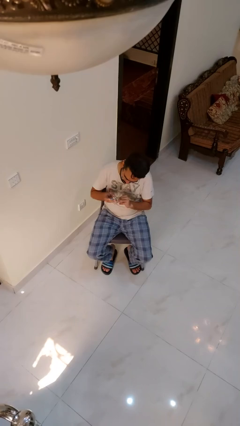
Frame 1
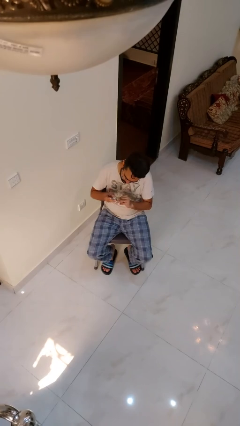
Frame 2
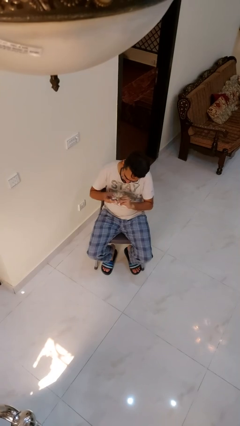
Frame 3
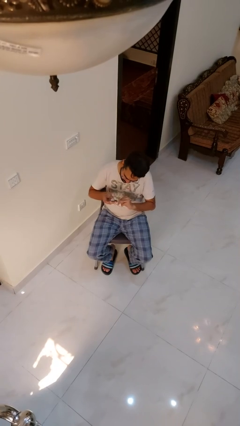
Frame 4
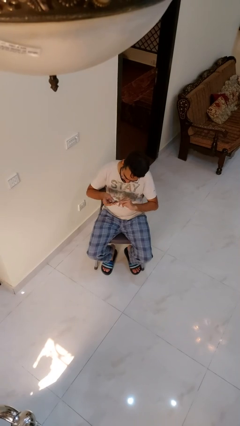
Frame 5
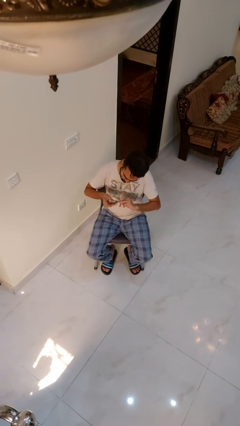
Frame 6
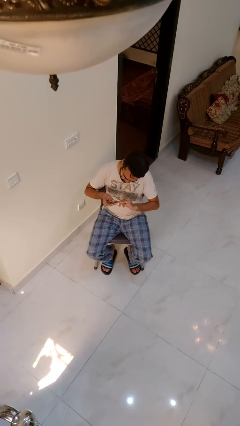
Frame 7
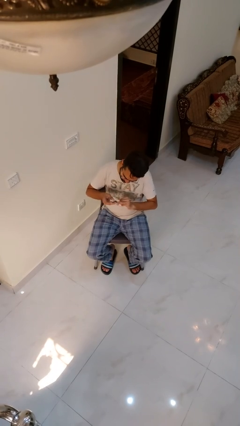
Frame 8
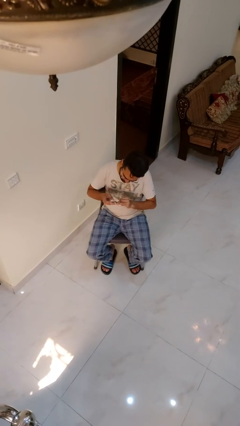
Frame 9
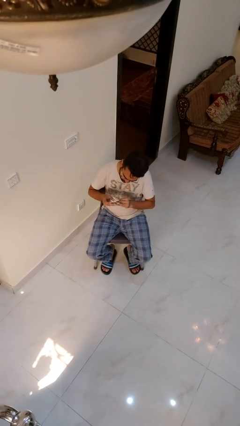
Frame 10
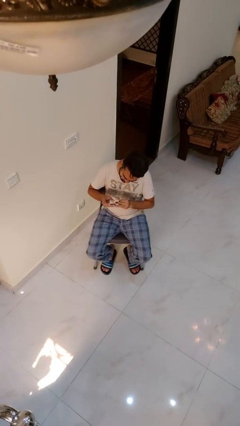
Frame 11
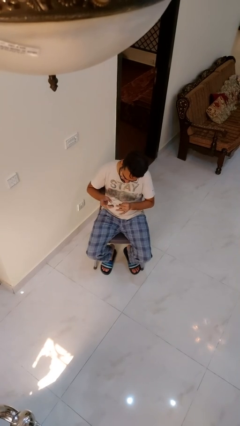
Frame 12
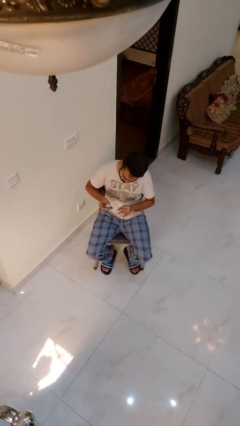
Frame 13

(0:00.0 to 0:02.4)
person clips fingernails

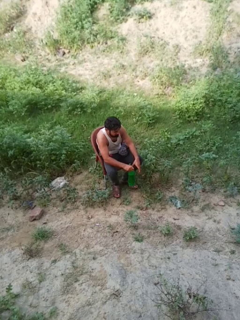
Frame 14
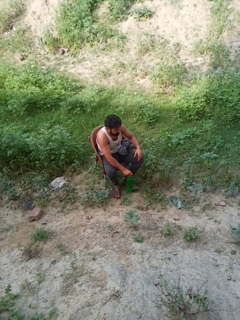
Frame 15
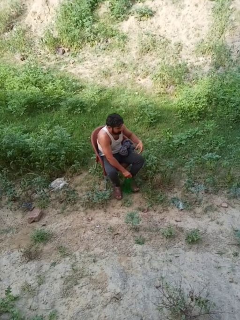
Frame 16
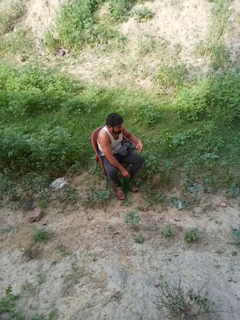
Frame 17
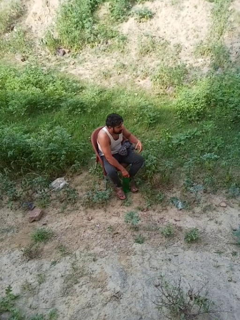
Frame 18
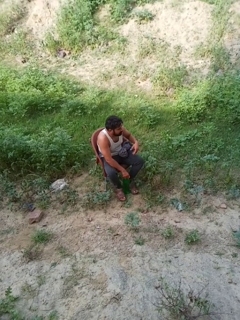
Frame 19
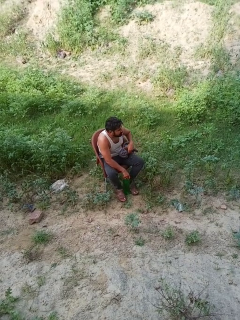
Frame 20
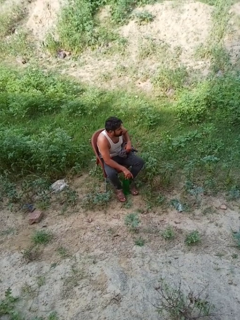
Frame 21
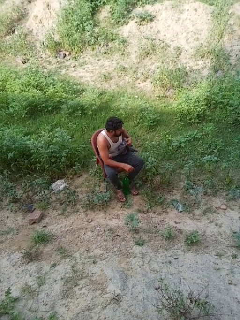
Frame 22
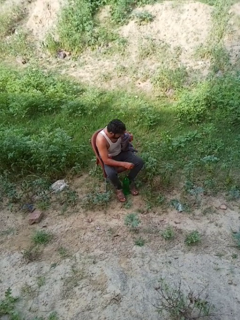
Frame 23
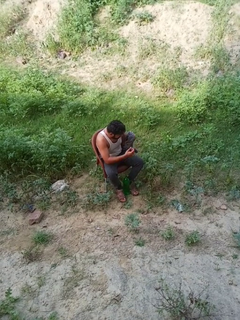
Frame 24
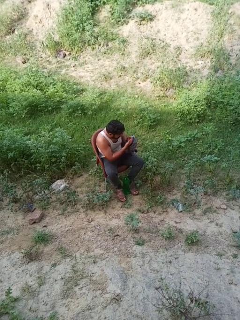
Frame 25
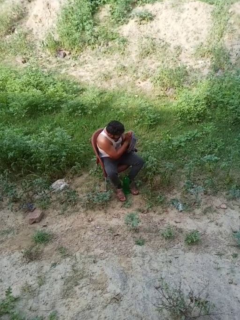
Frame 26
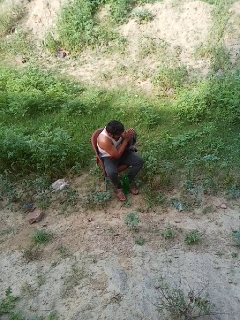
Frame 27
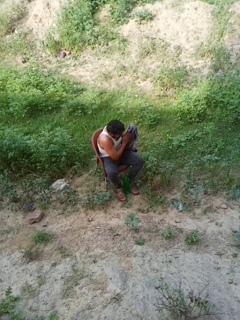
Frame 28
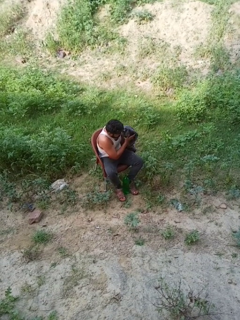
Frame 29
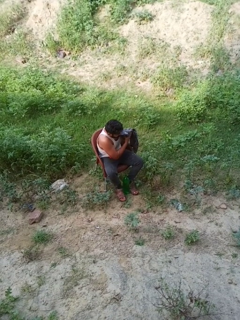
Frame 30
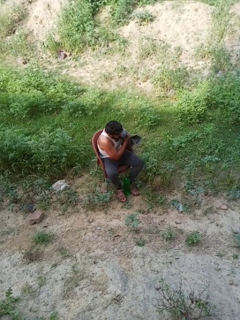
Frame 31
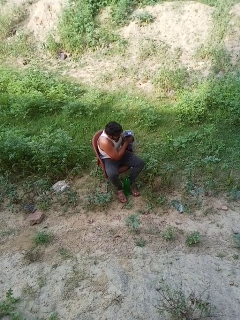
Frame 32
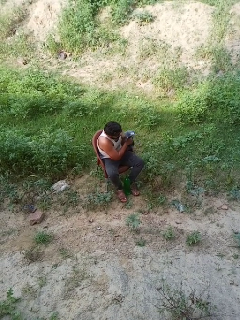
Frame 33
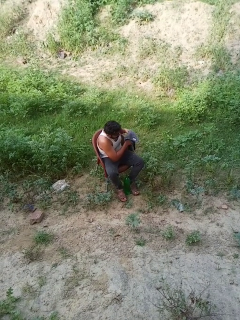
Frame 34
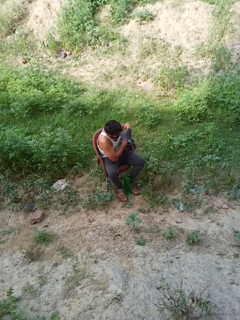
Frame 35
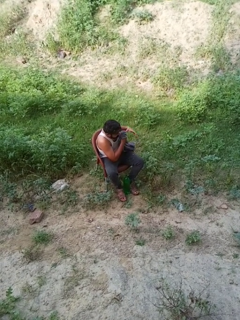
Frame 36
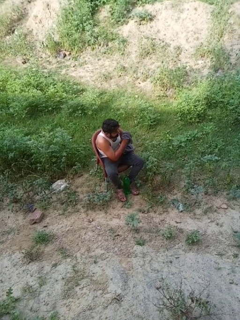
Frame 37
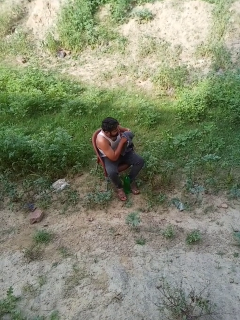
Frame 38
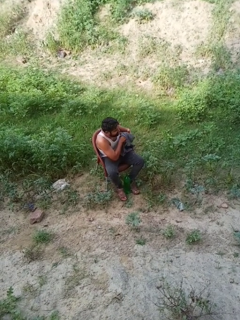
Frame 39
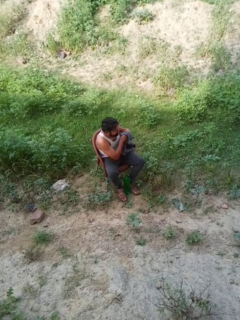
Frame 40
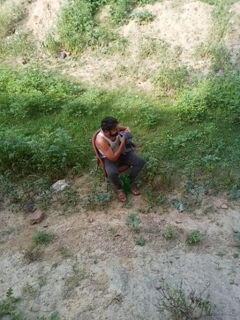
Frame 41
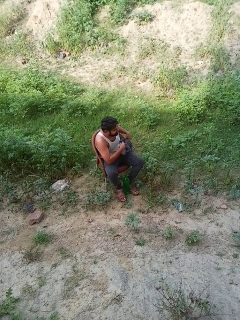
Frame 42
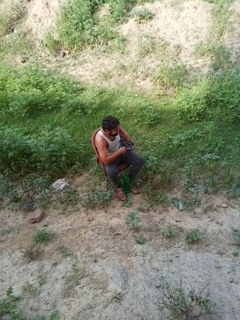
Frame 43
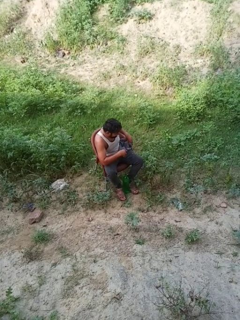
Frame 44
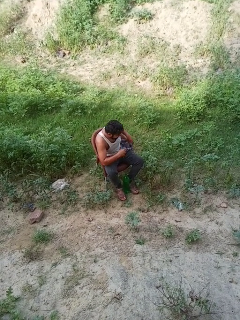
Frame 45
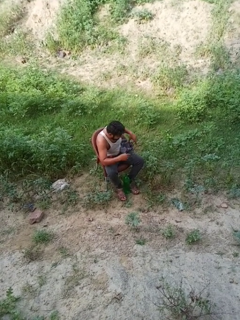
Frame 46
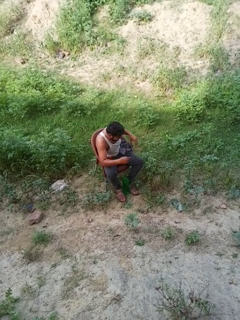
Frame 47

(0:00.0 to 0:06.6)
person dries hands with towel

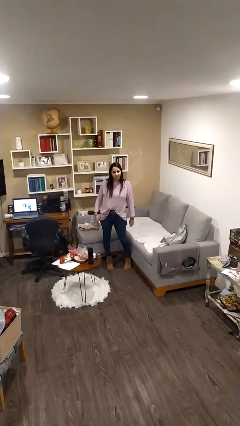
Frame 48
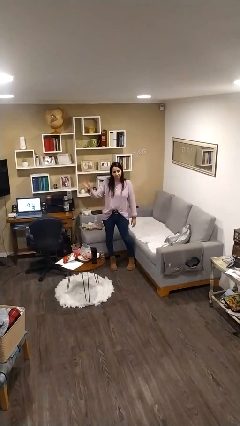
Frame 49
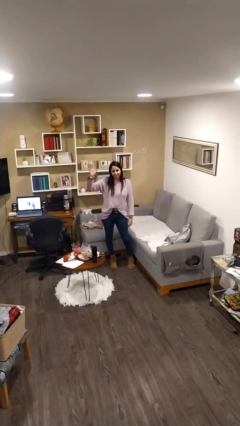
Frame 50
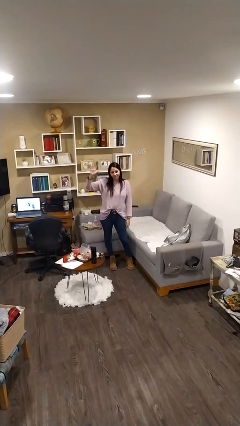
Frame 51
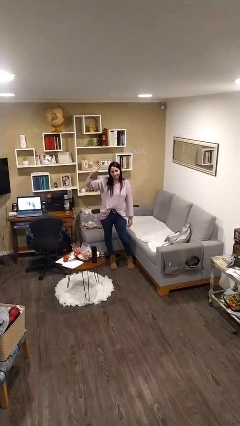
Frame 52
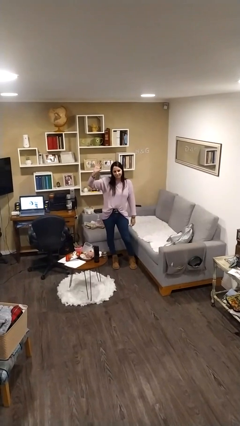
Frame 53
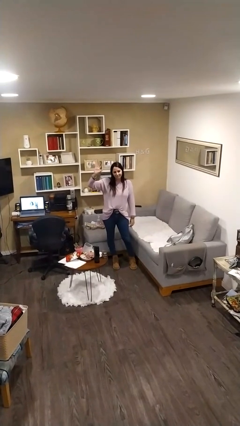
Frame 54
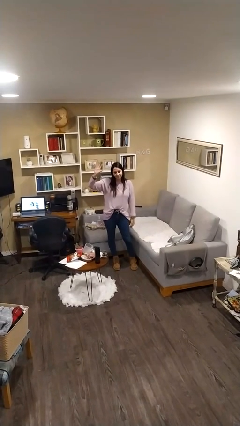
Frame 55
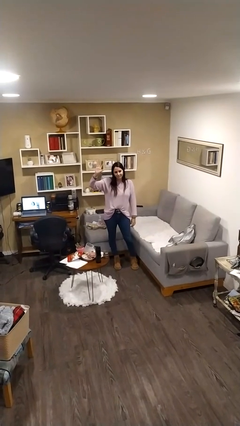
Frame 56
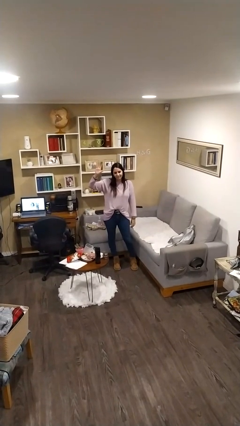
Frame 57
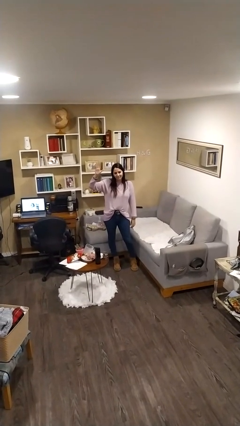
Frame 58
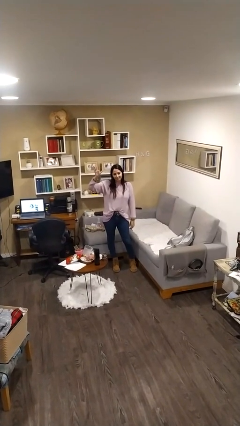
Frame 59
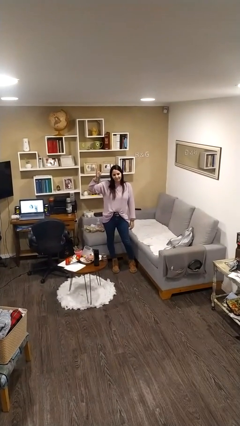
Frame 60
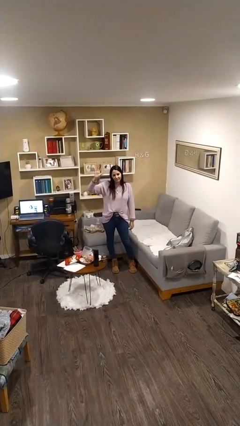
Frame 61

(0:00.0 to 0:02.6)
person waves at person

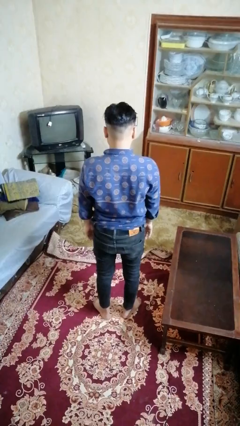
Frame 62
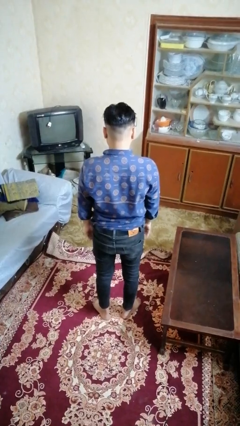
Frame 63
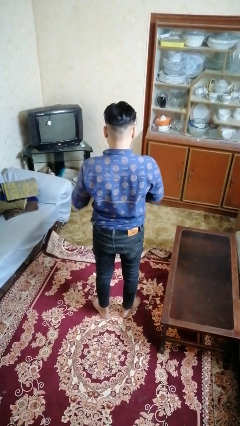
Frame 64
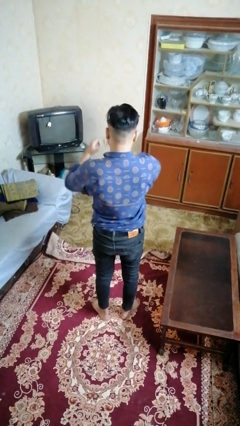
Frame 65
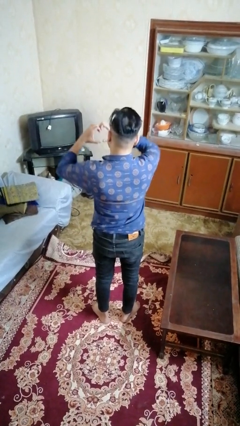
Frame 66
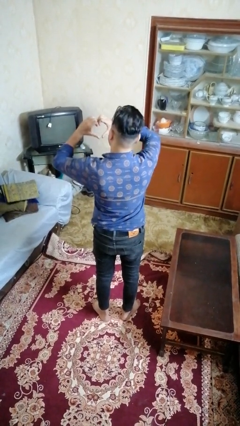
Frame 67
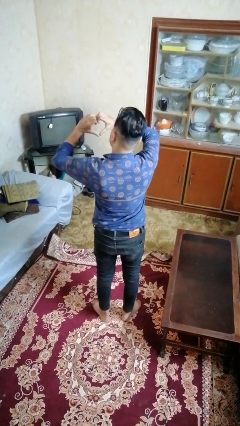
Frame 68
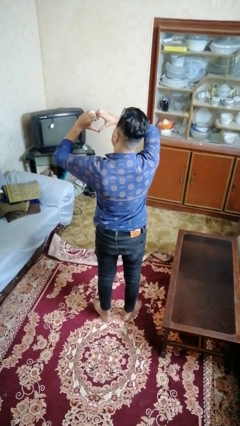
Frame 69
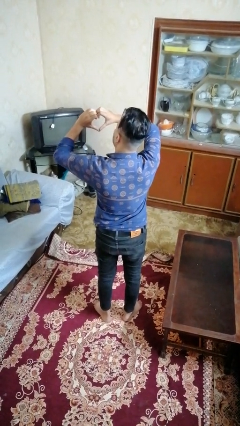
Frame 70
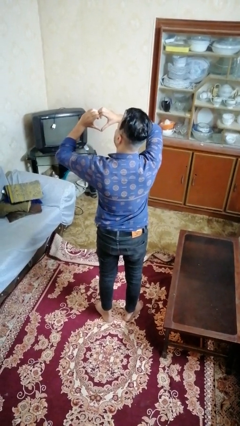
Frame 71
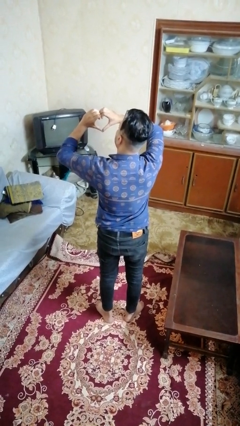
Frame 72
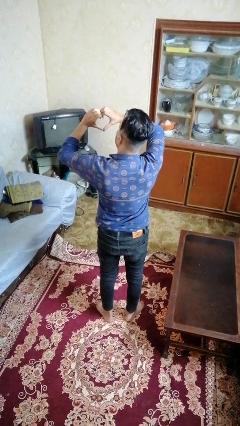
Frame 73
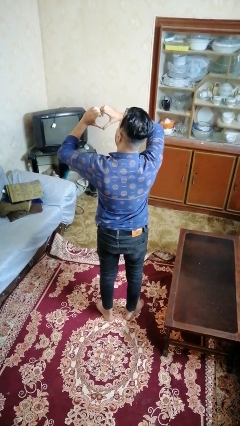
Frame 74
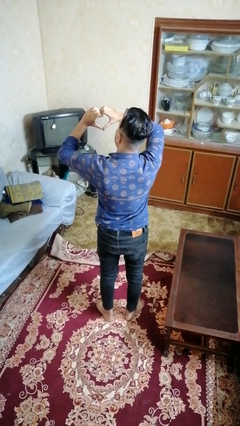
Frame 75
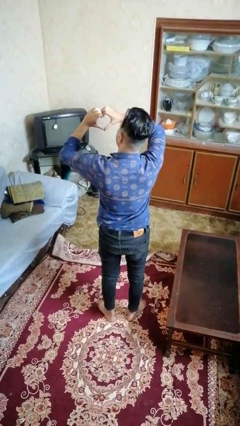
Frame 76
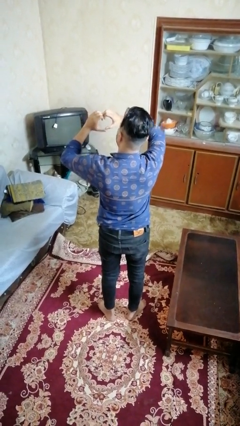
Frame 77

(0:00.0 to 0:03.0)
person gestures heart

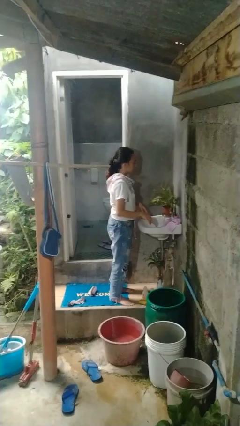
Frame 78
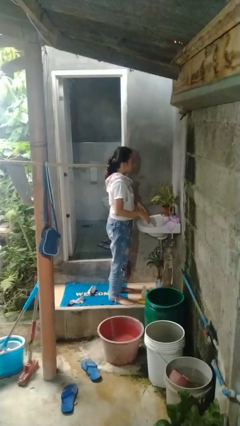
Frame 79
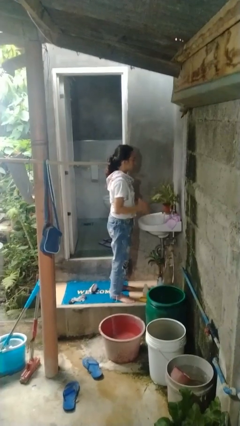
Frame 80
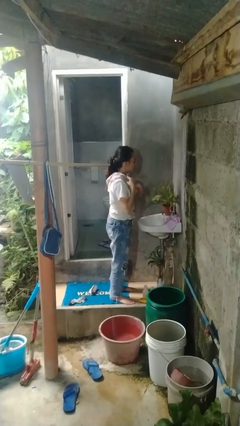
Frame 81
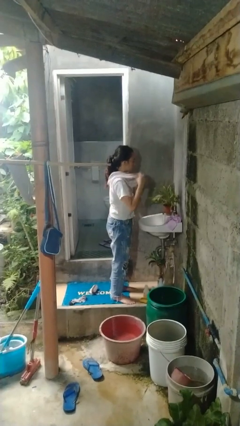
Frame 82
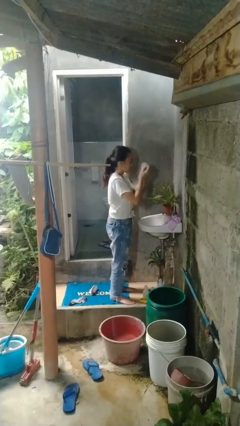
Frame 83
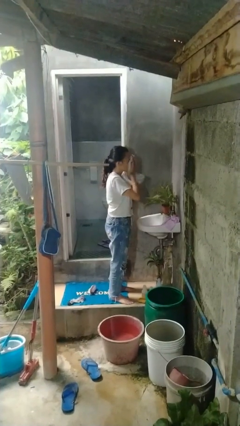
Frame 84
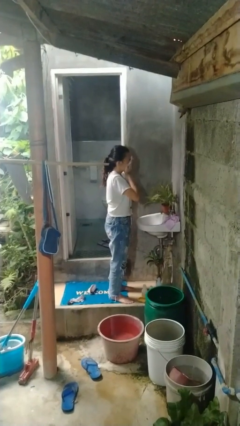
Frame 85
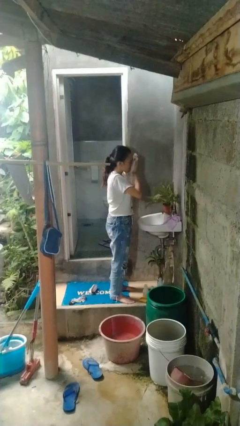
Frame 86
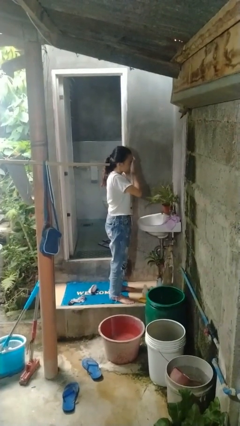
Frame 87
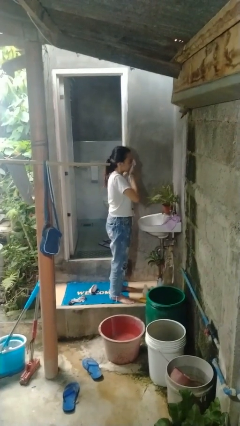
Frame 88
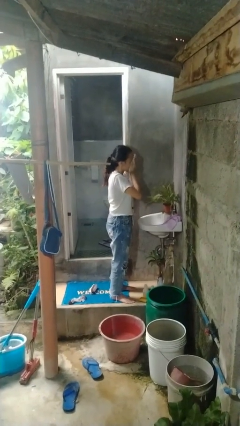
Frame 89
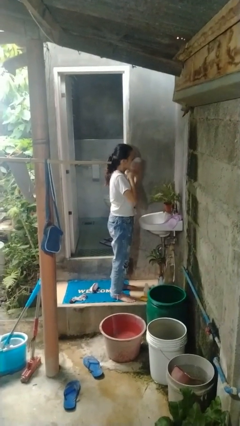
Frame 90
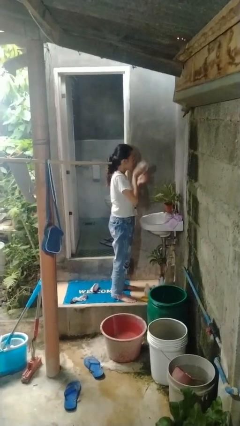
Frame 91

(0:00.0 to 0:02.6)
person dries face with towel

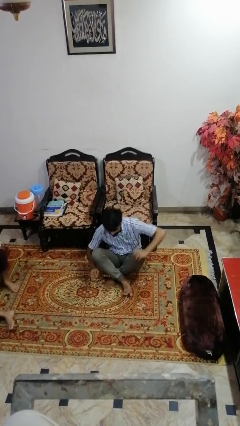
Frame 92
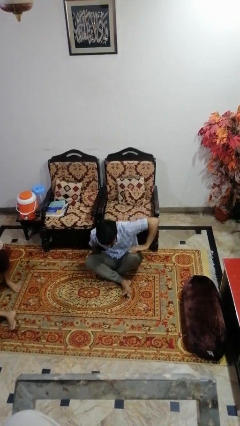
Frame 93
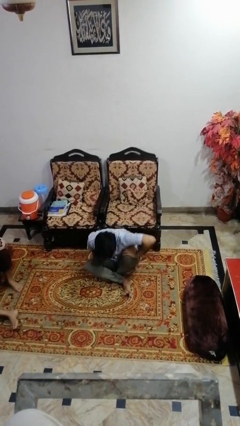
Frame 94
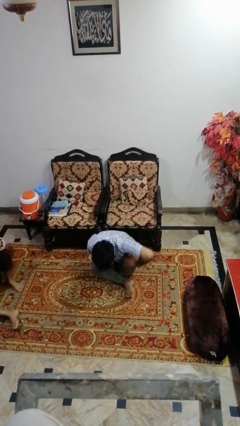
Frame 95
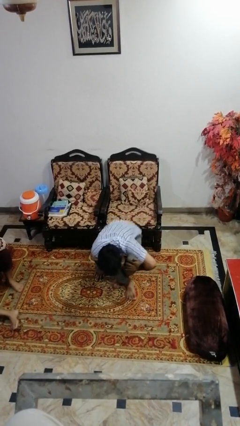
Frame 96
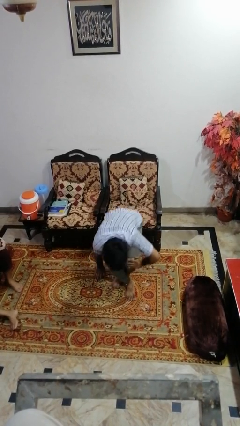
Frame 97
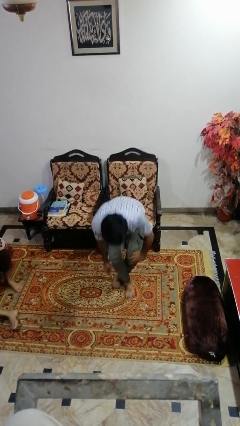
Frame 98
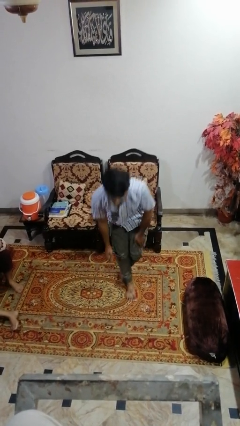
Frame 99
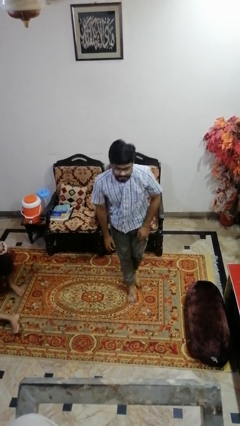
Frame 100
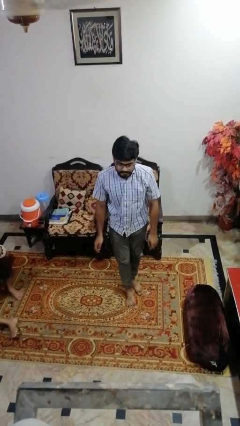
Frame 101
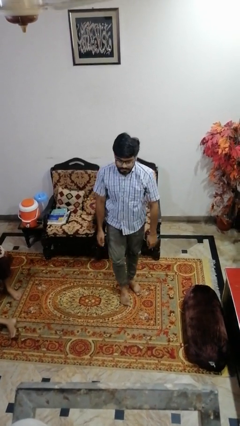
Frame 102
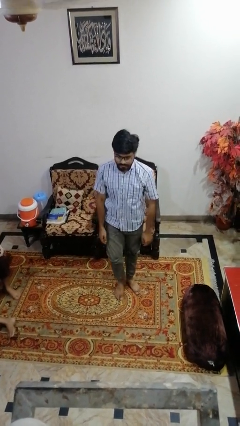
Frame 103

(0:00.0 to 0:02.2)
person stands up from floor

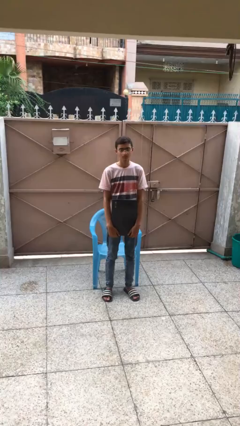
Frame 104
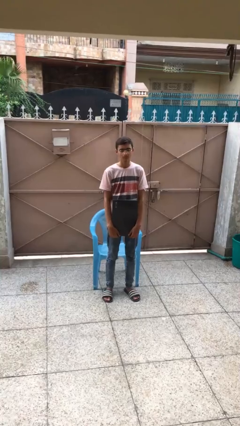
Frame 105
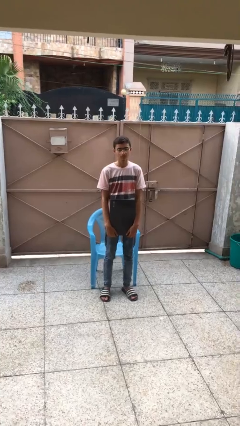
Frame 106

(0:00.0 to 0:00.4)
person sits down
